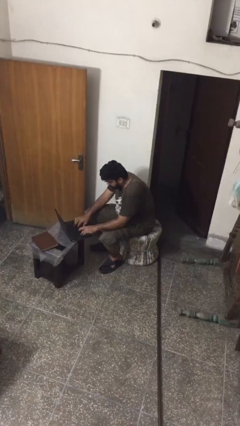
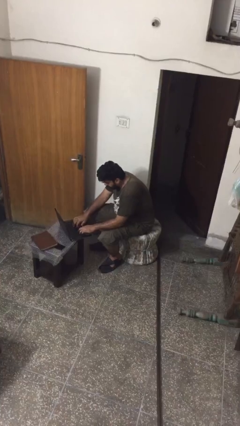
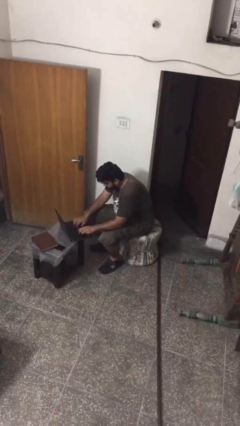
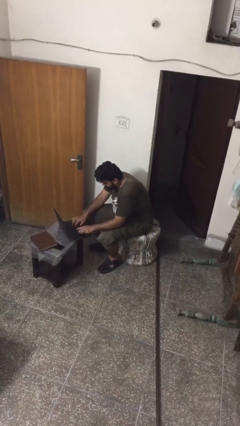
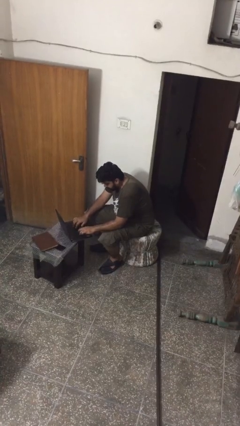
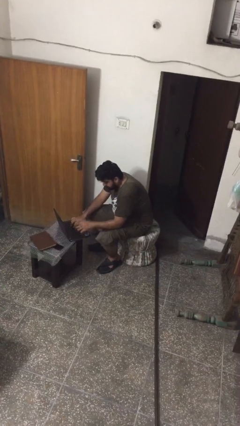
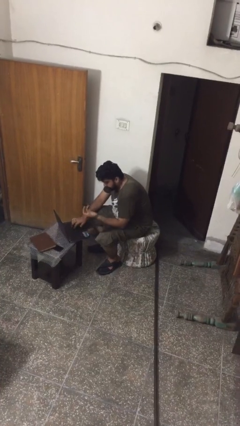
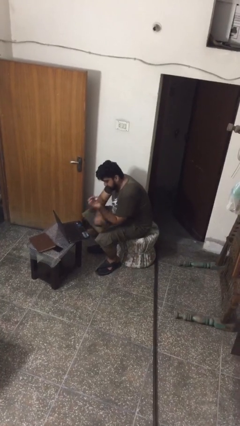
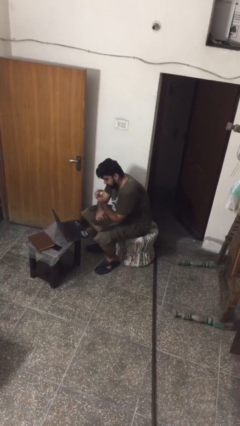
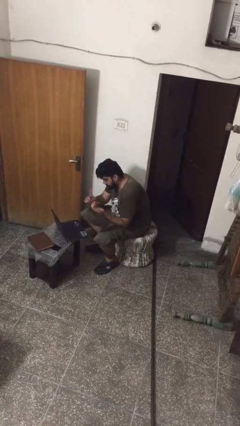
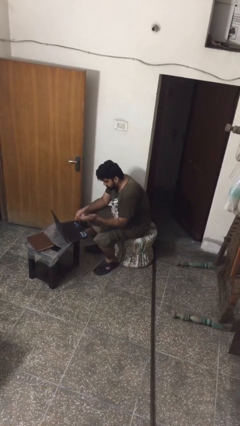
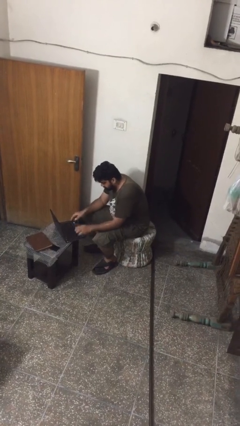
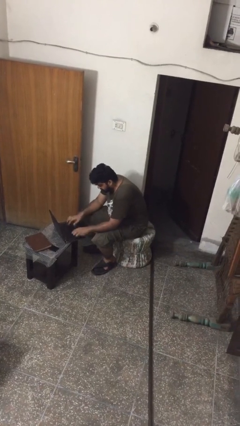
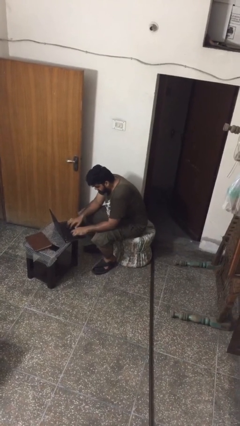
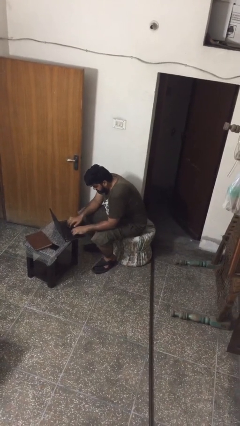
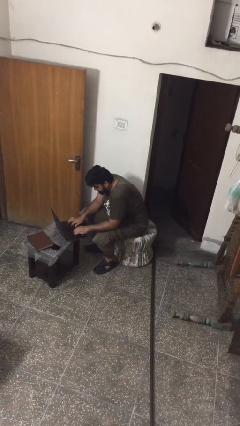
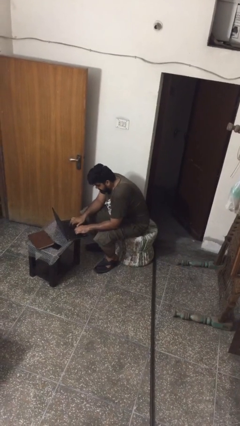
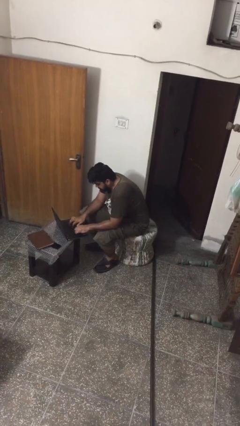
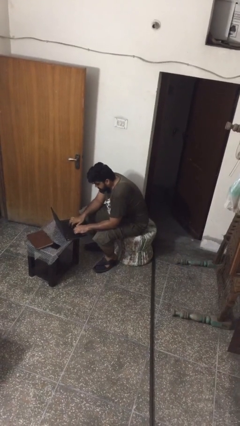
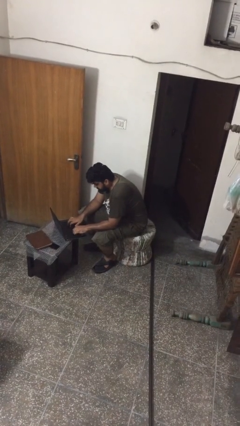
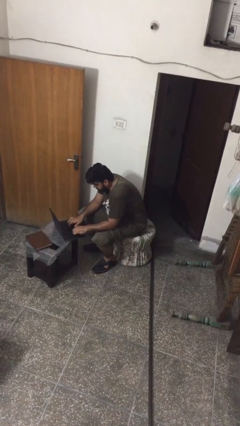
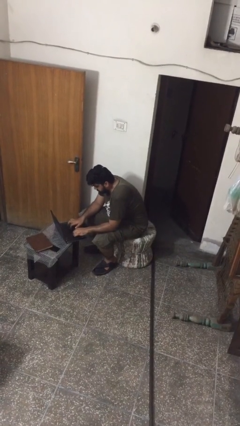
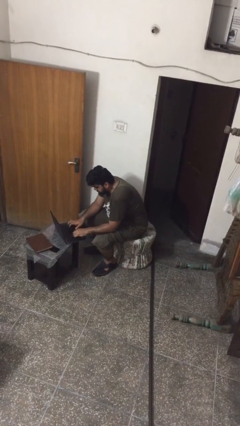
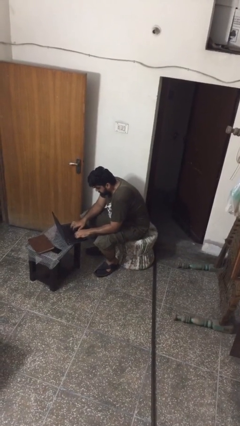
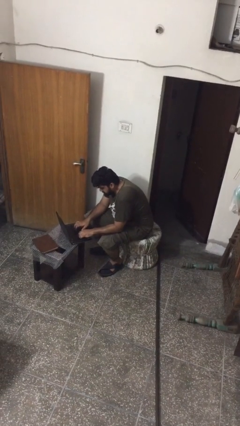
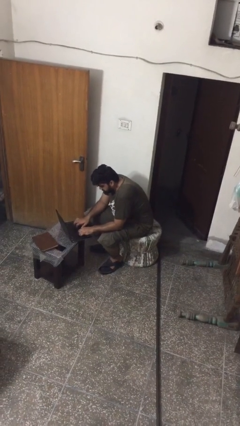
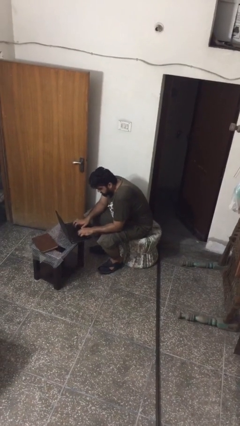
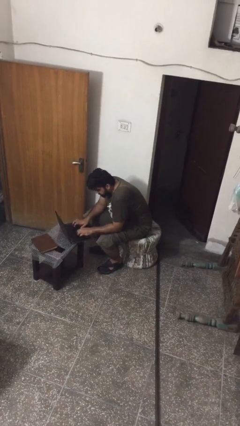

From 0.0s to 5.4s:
person interacts with laptop

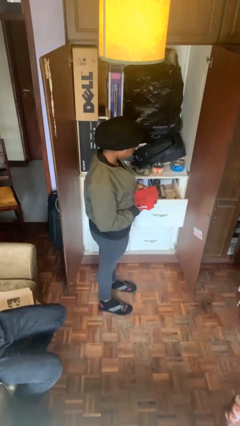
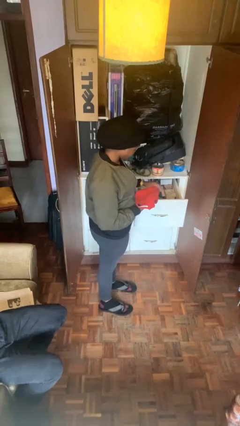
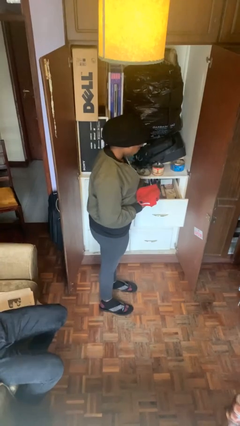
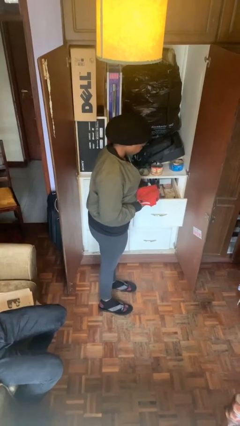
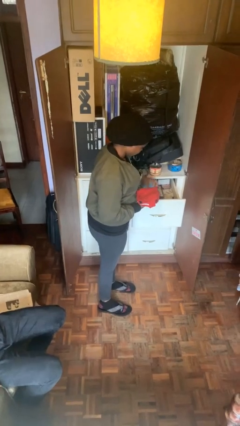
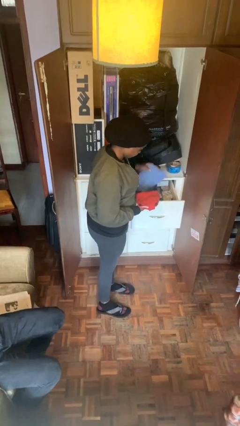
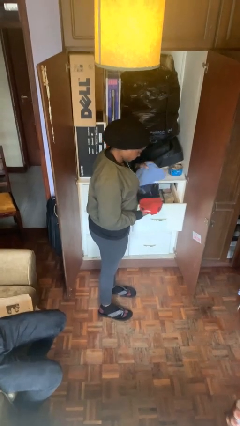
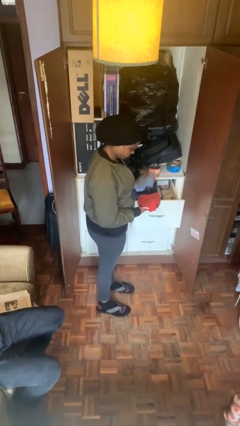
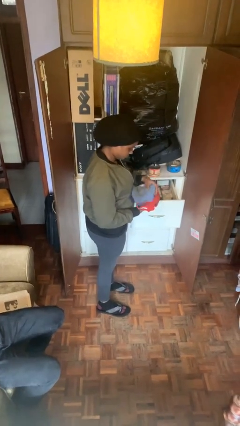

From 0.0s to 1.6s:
person takes clothes from dresser

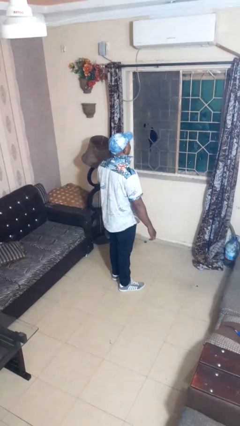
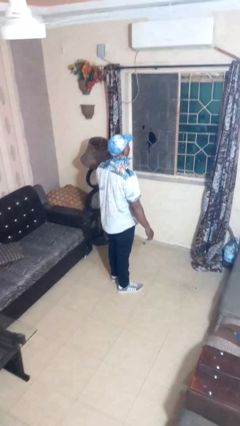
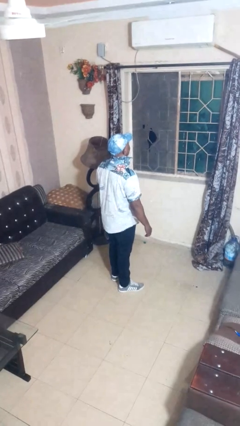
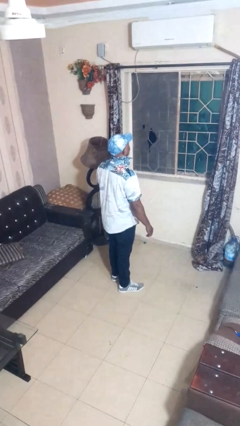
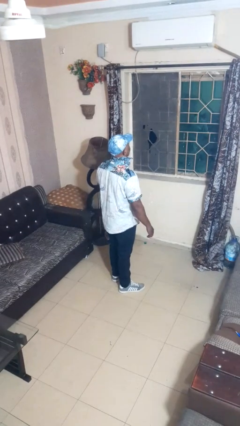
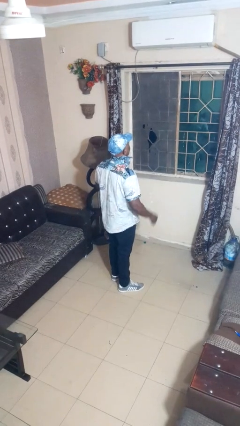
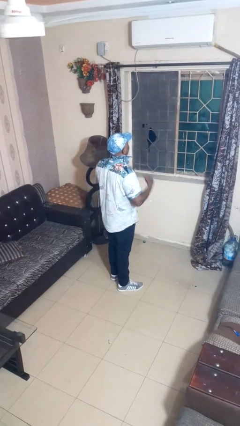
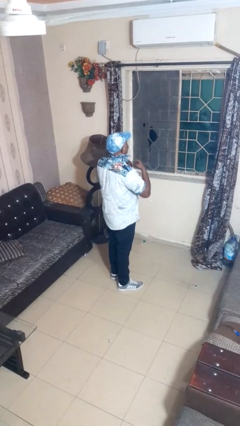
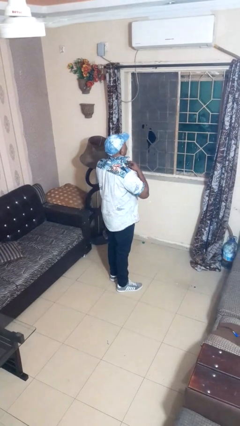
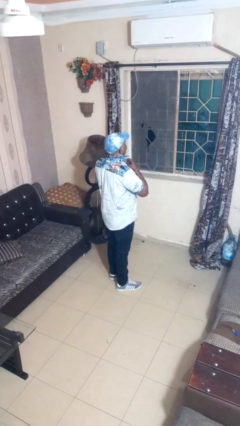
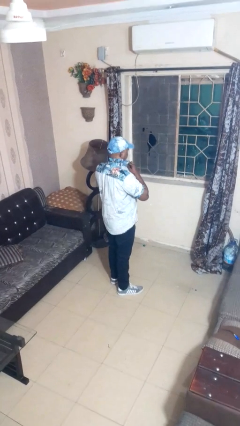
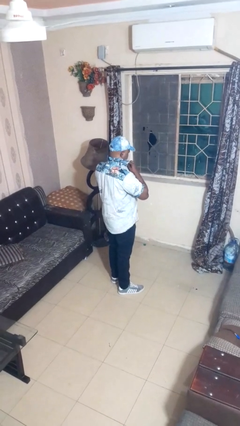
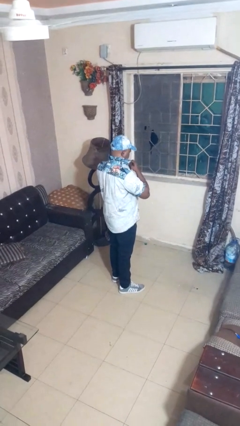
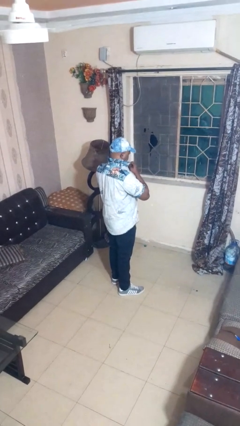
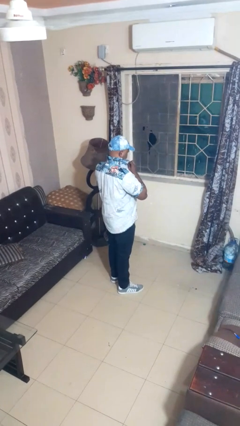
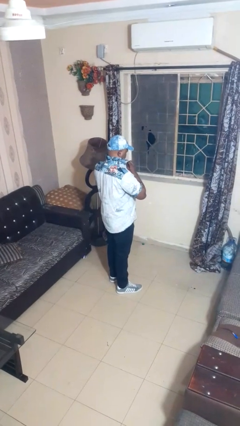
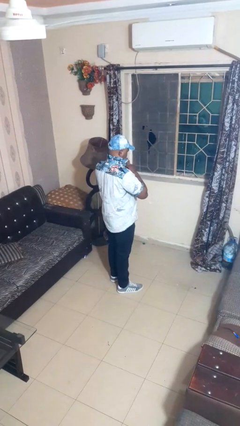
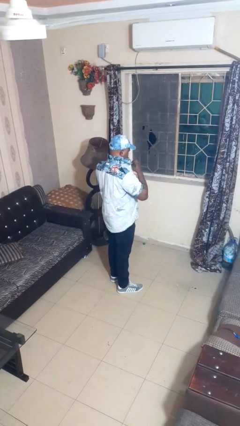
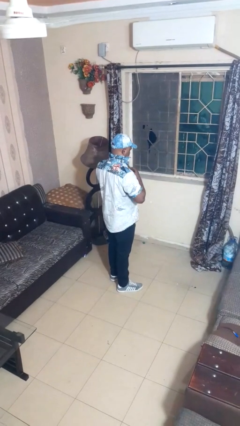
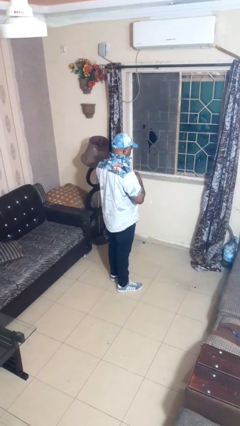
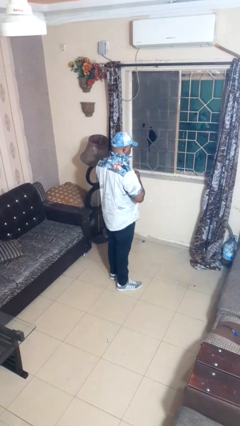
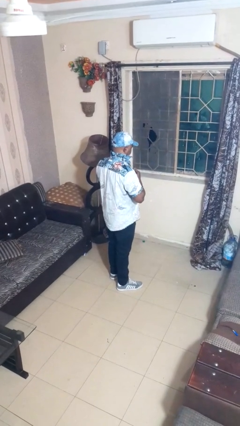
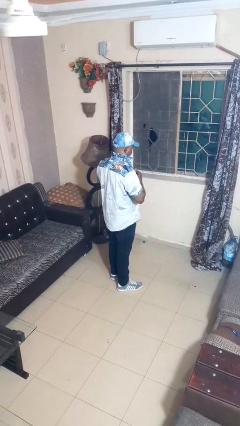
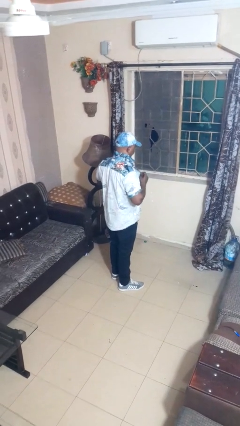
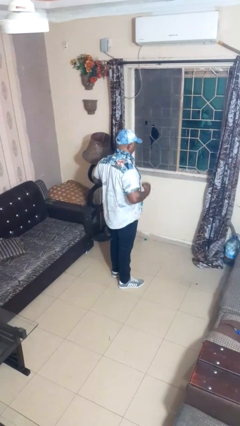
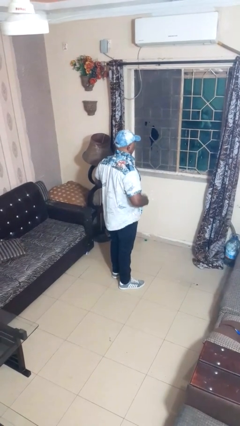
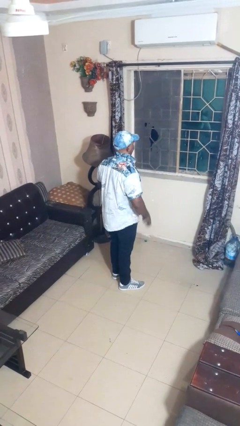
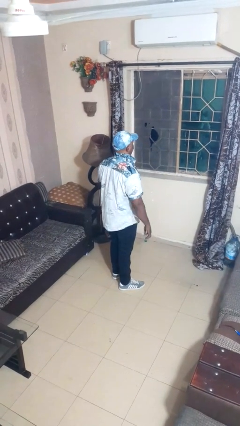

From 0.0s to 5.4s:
person buttons shirt

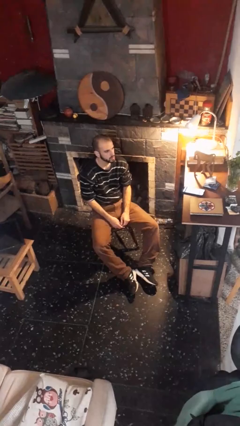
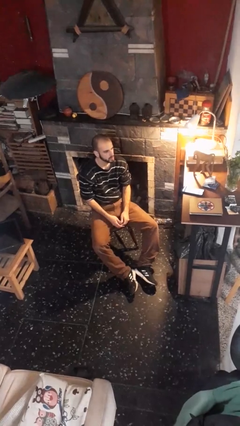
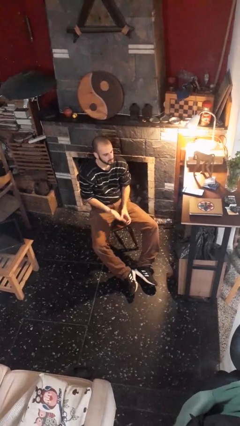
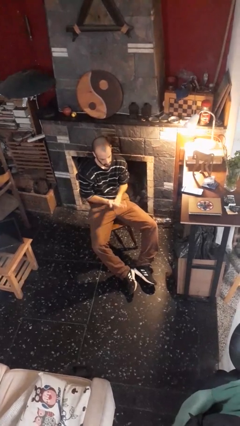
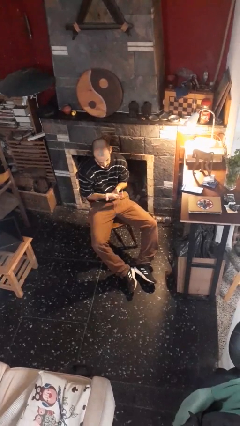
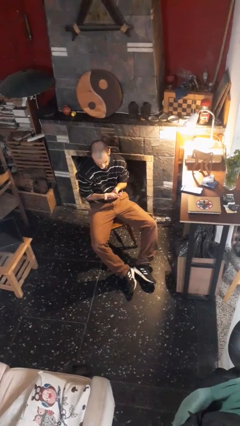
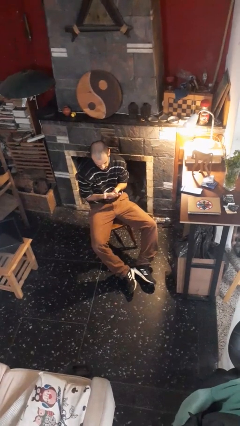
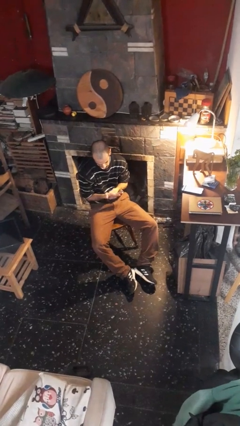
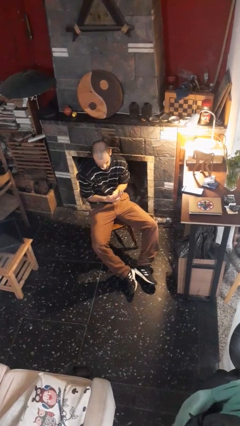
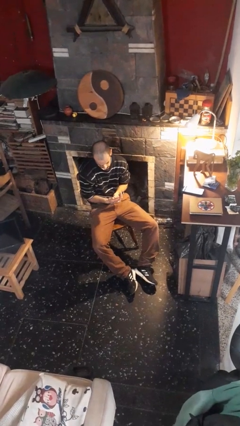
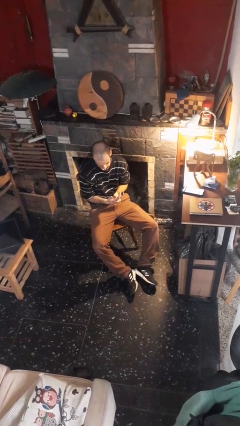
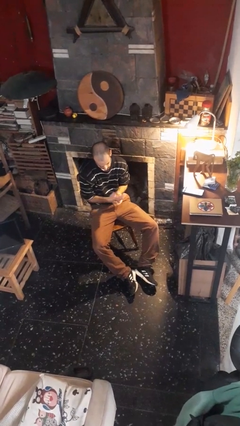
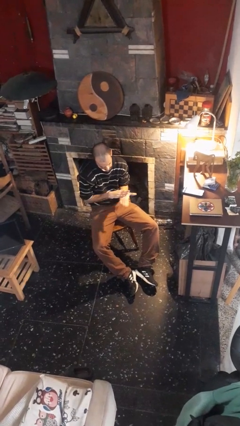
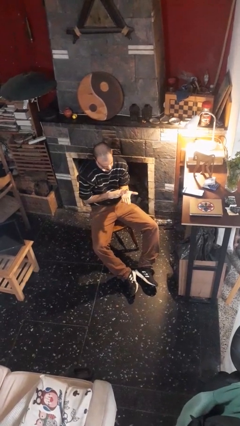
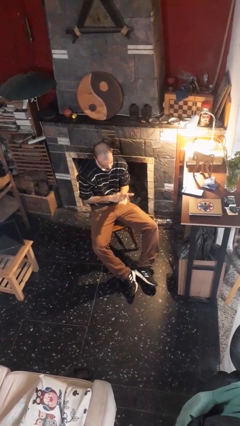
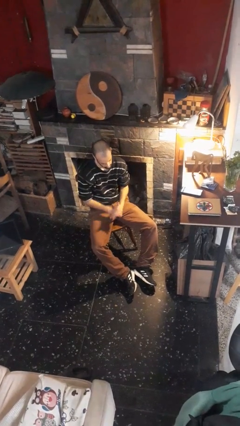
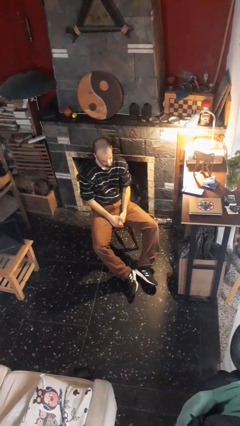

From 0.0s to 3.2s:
person looks at hands in lap

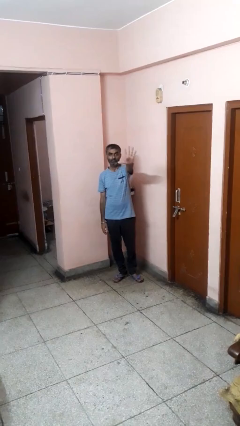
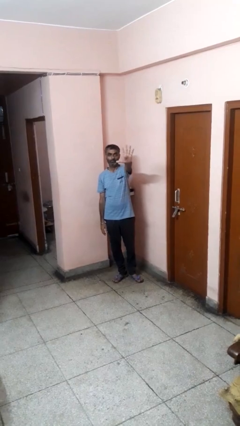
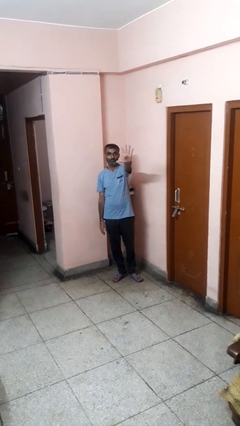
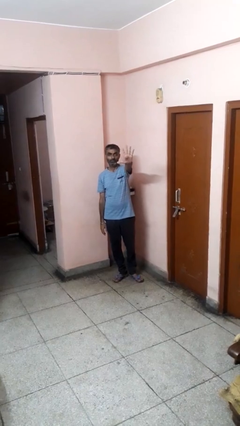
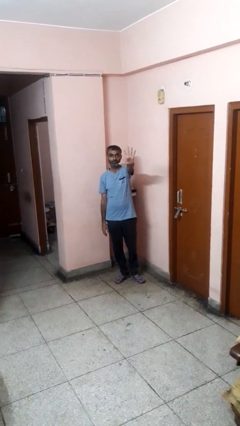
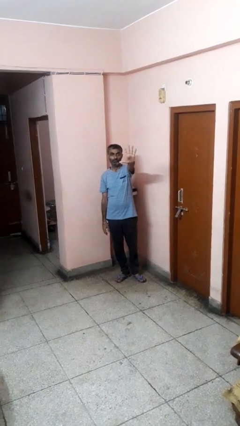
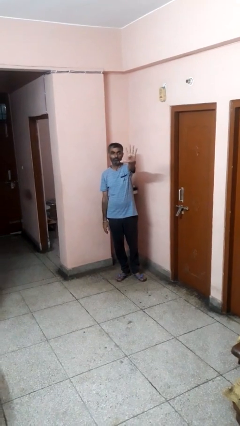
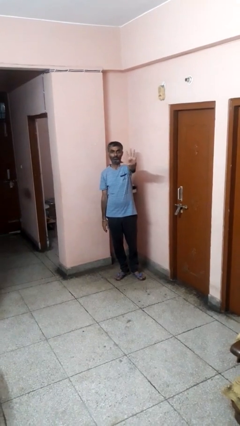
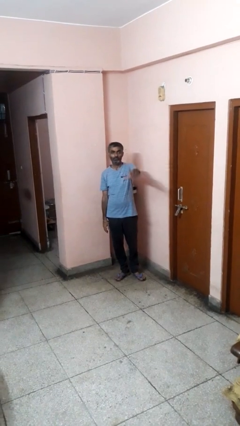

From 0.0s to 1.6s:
person gestures number five

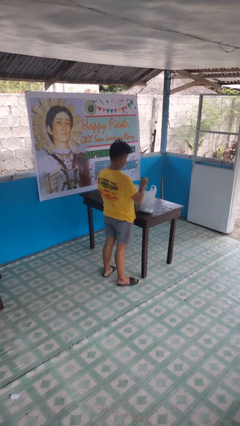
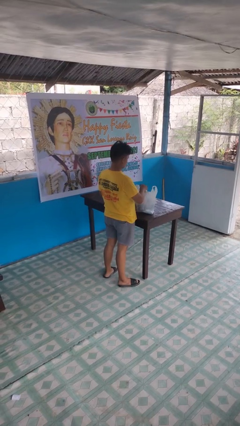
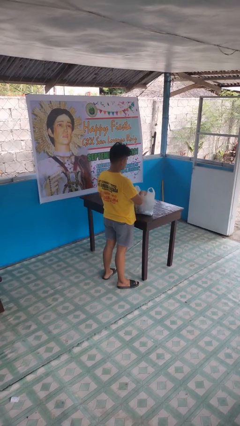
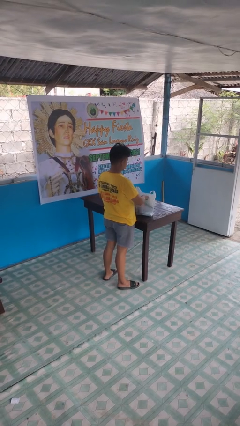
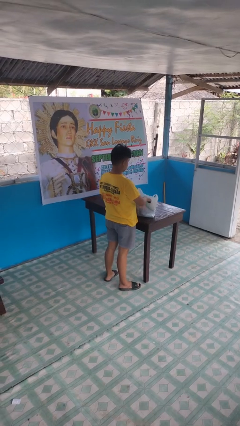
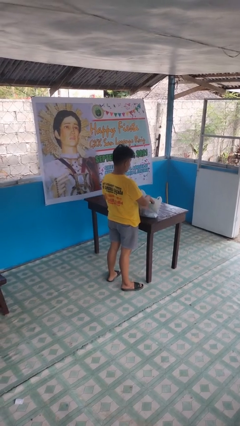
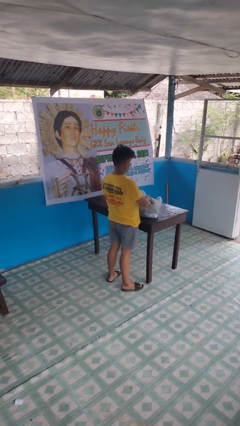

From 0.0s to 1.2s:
person puts object into bag
